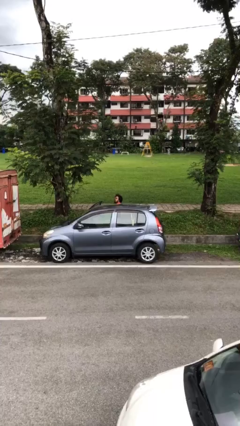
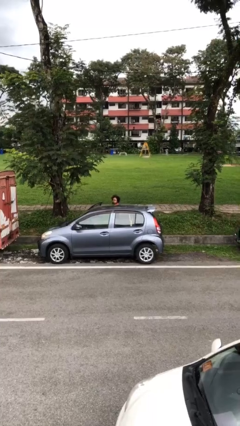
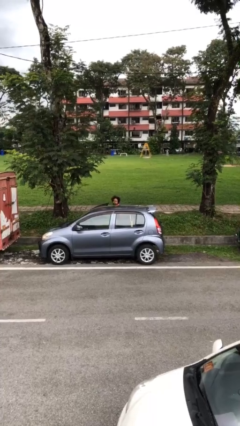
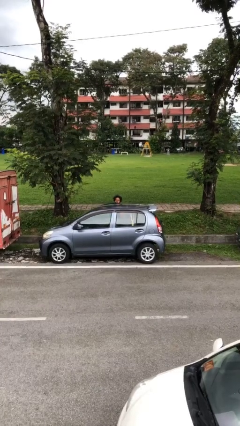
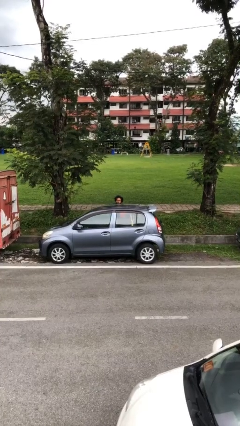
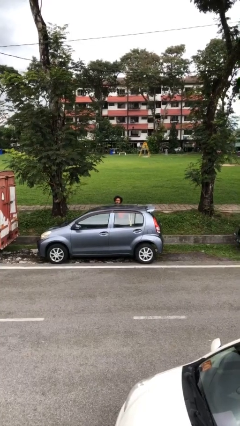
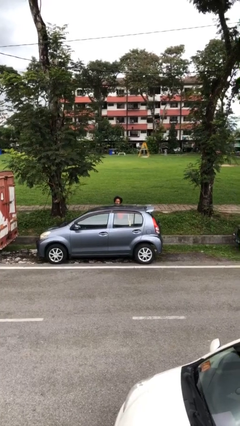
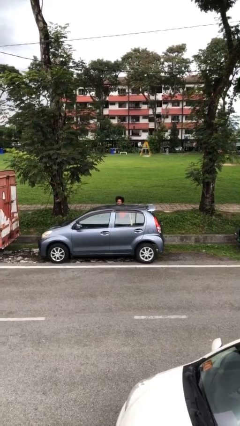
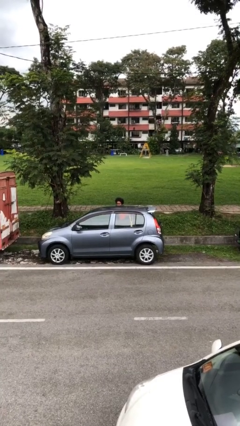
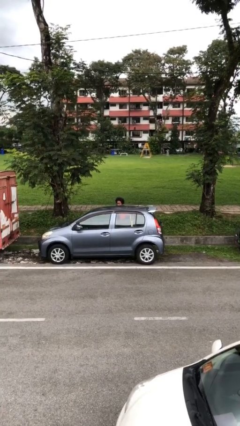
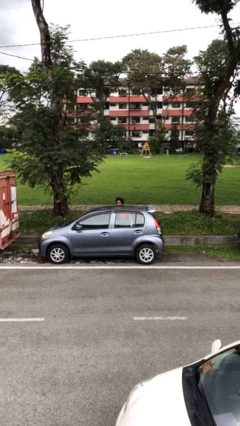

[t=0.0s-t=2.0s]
person closes car door

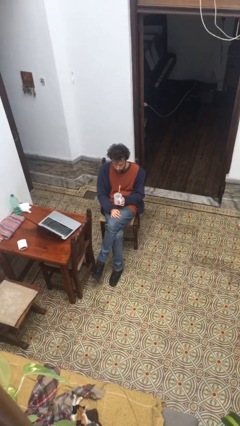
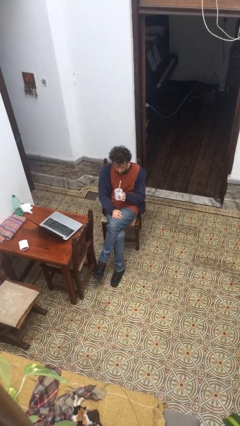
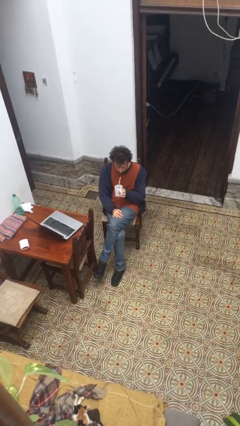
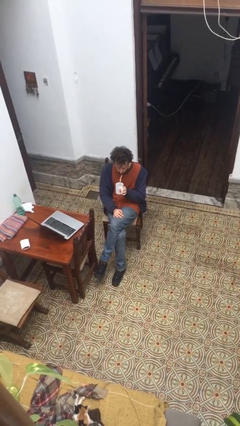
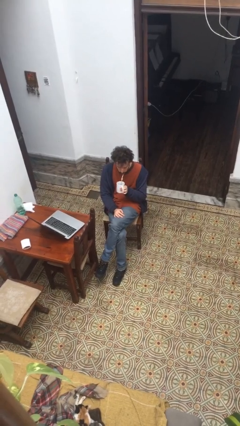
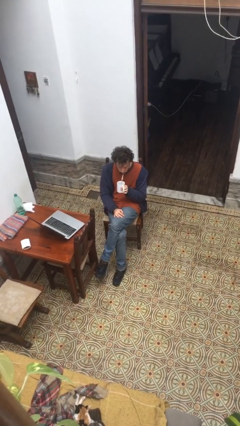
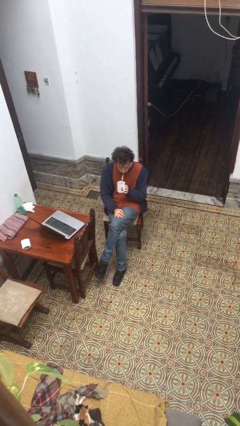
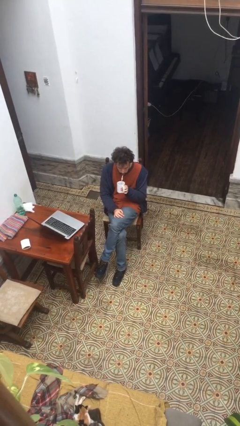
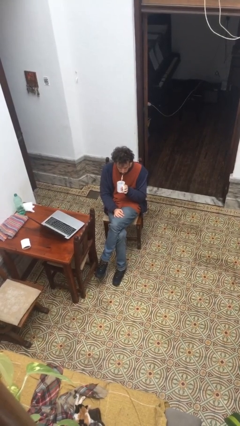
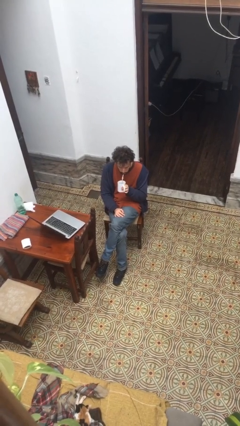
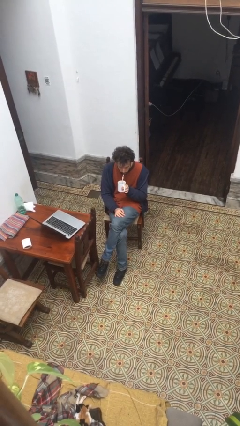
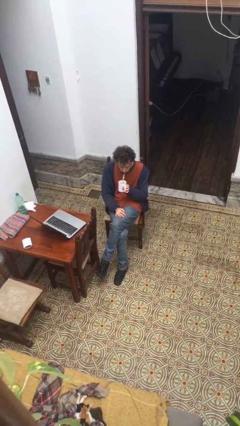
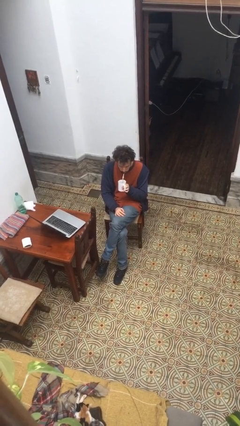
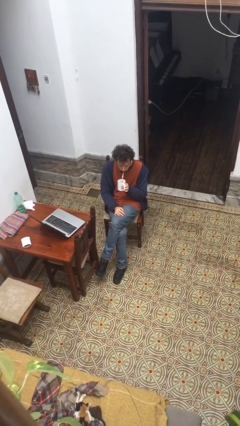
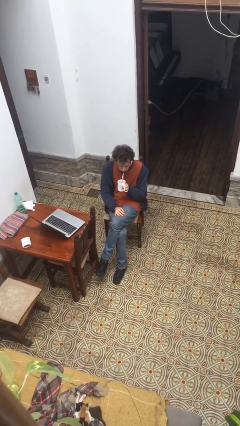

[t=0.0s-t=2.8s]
person drinks from straw

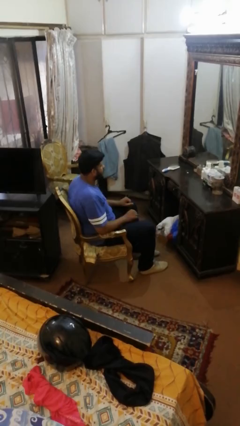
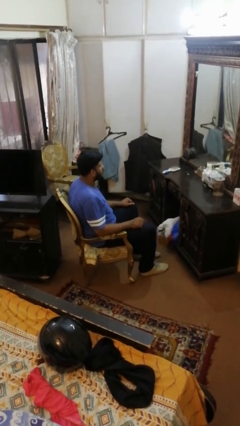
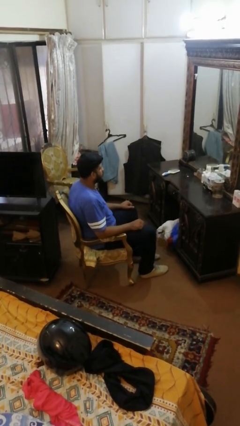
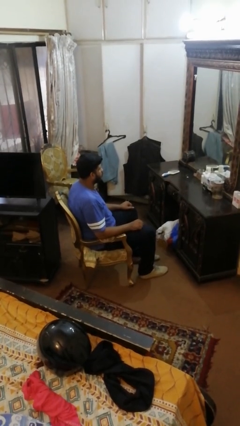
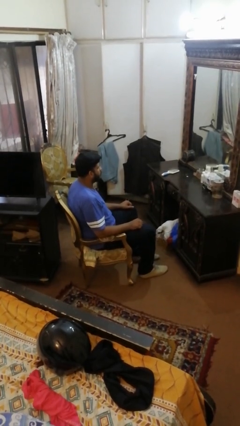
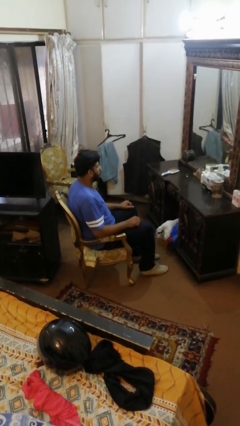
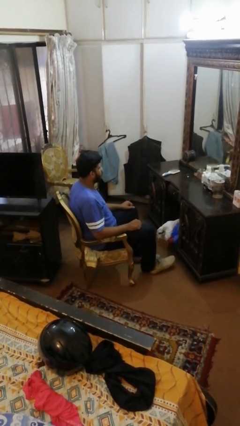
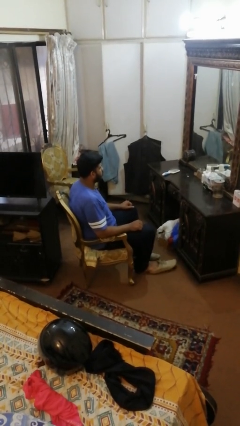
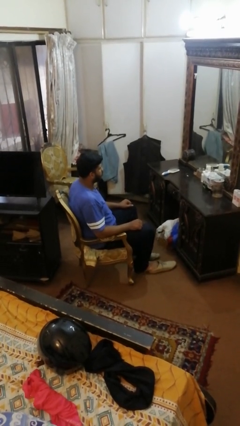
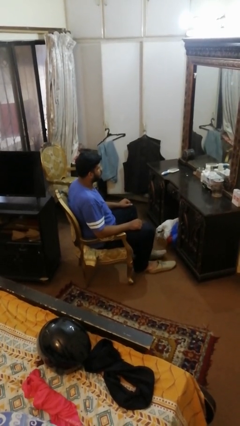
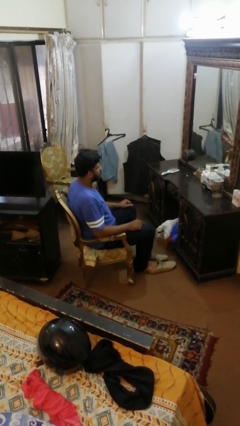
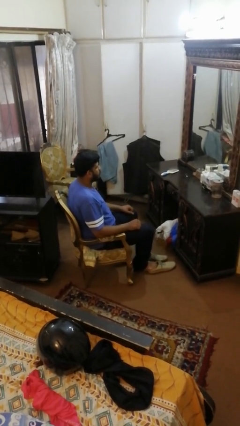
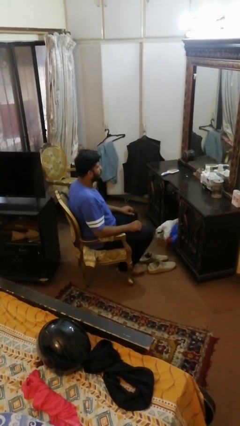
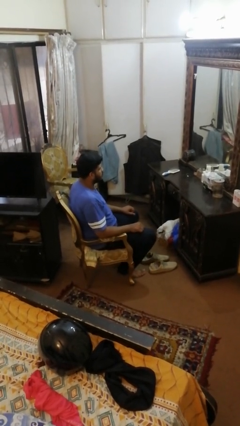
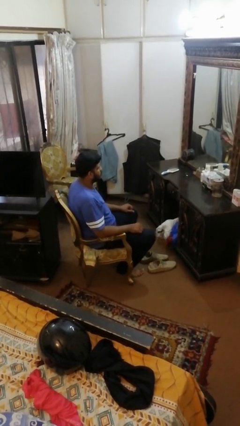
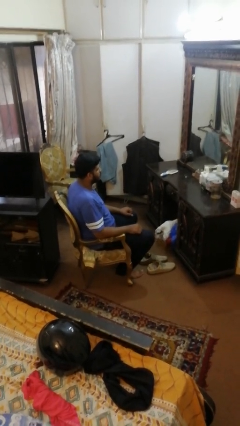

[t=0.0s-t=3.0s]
person takes off shoes

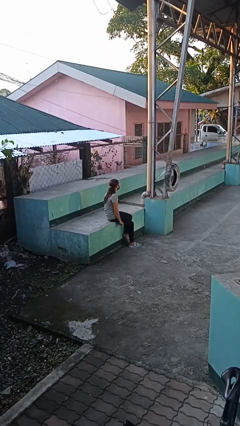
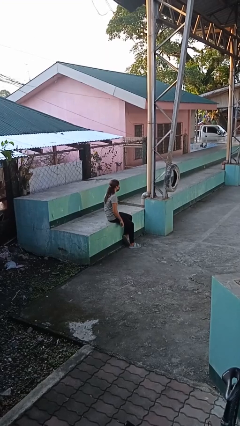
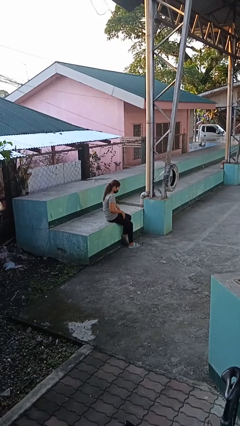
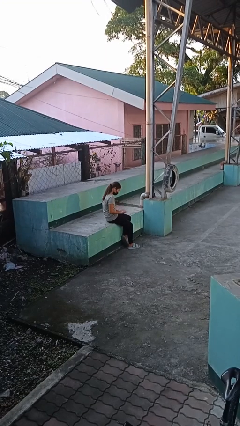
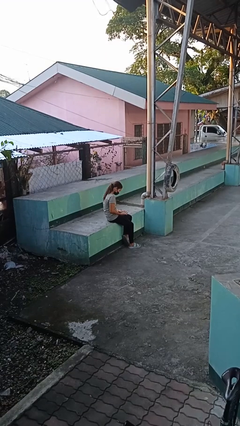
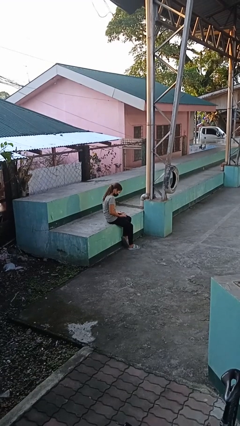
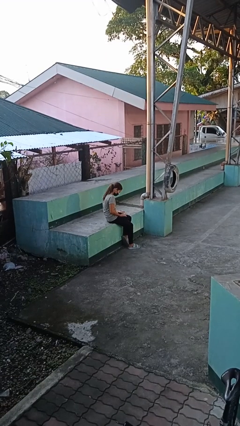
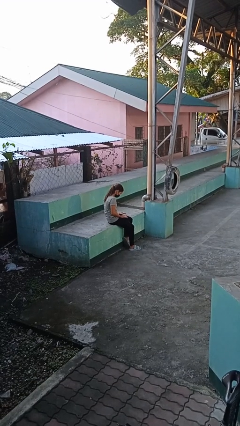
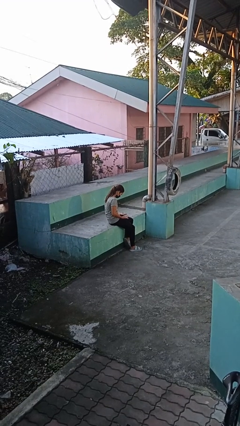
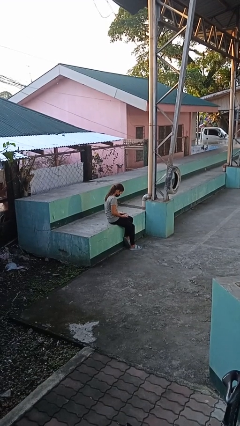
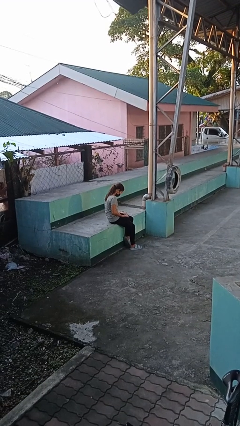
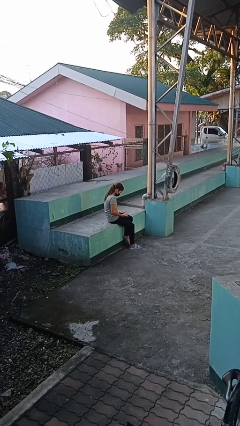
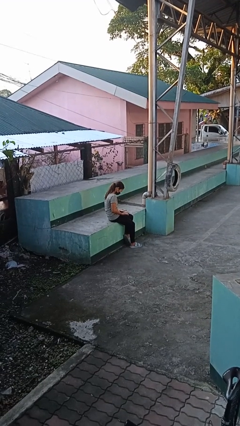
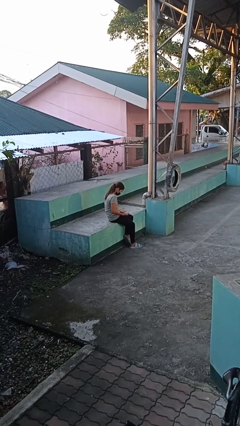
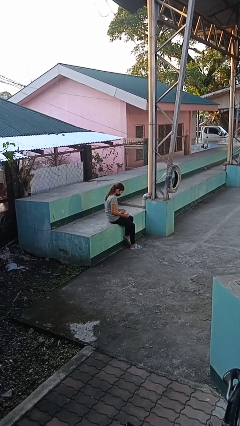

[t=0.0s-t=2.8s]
person looks at hands in lap

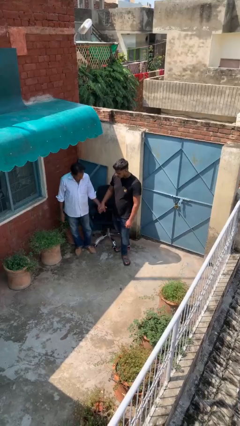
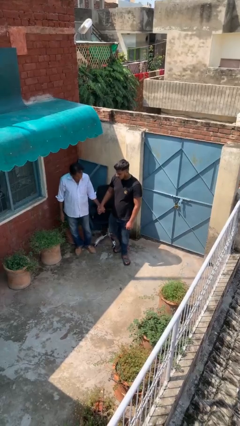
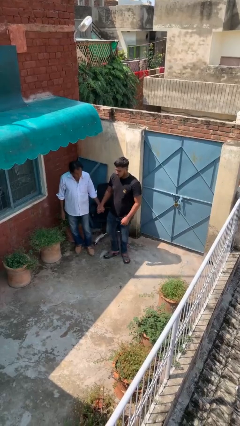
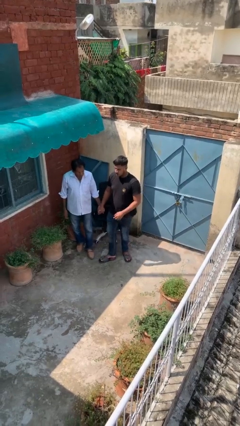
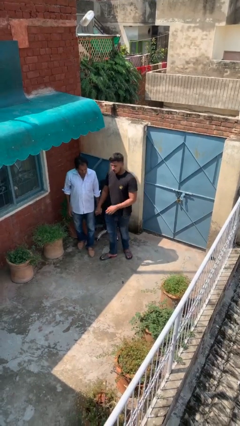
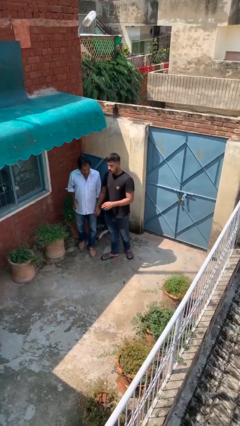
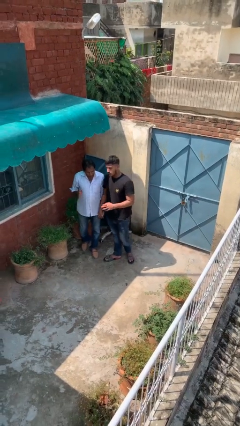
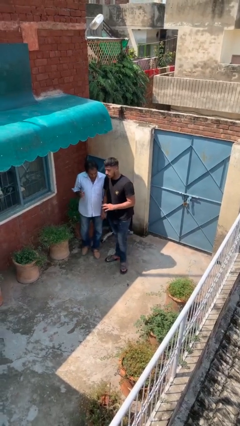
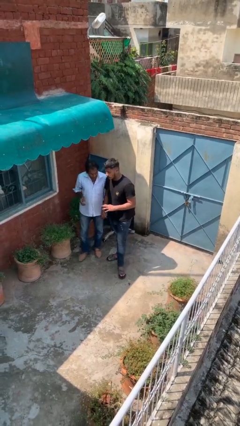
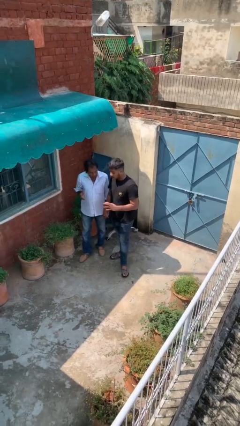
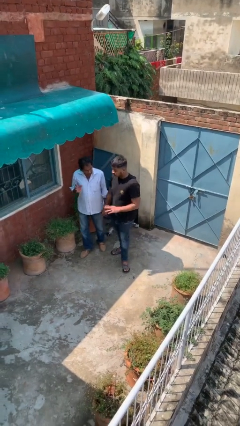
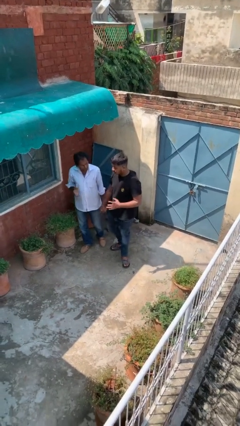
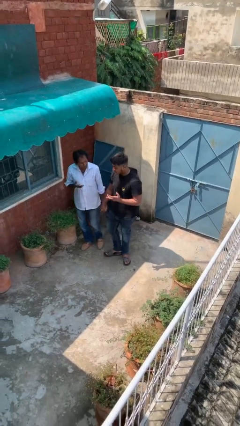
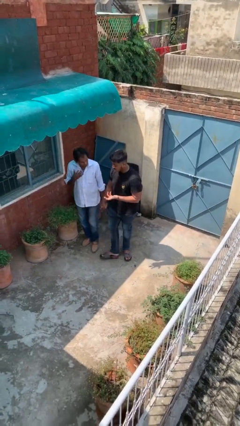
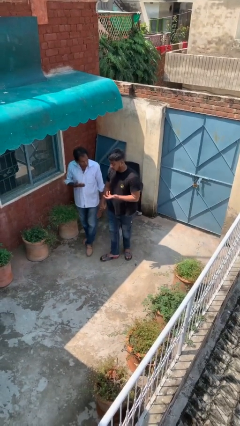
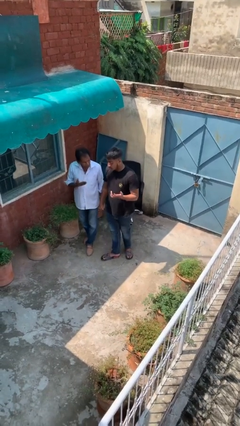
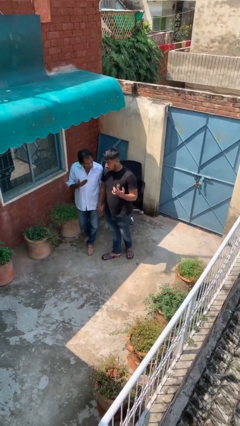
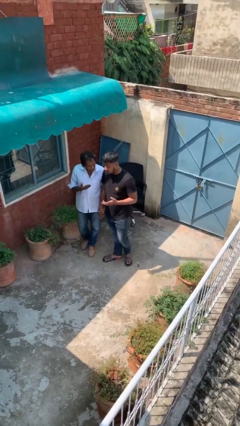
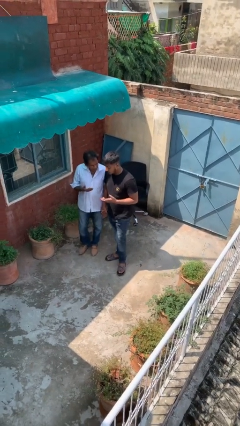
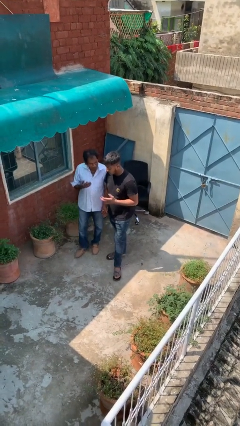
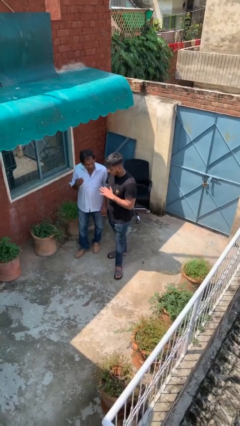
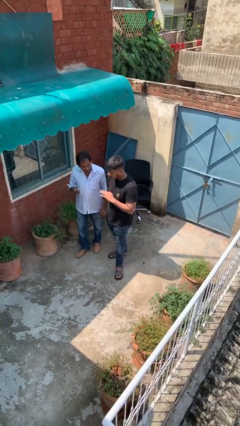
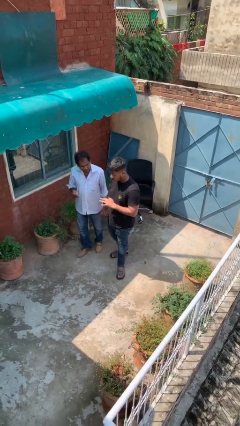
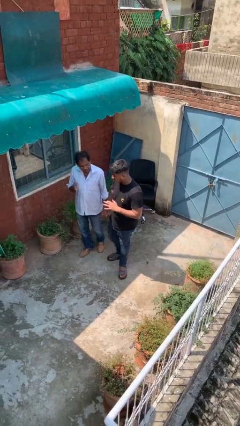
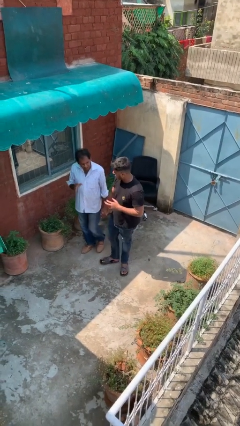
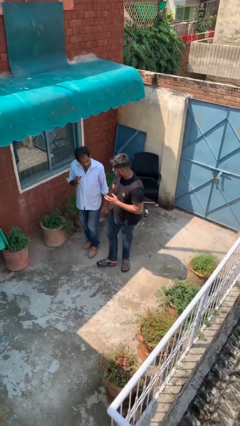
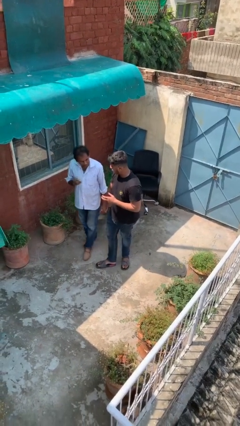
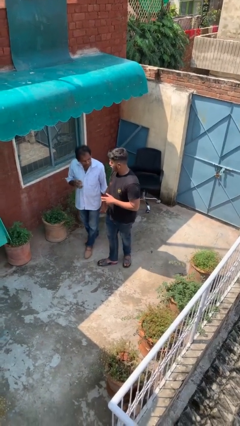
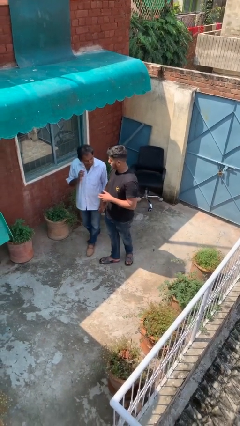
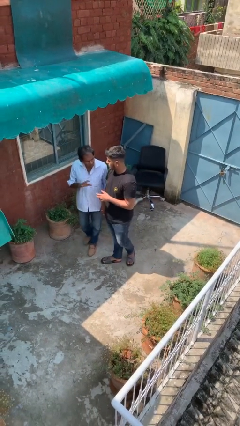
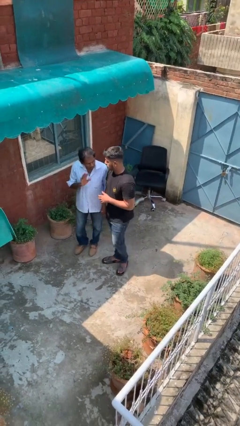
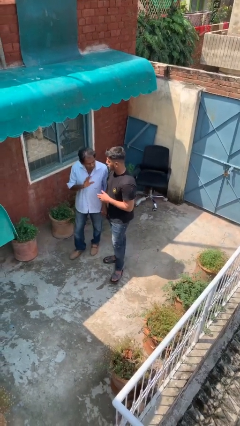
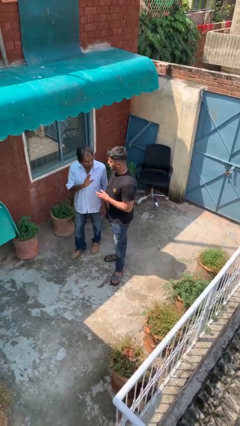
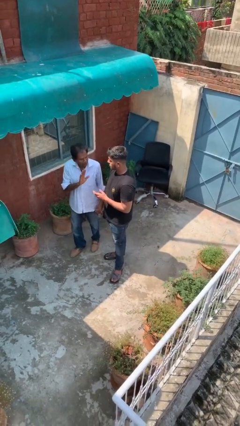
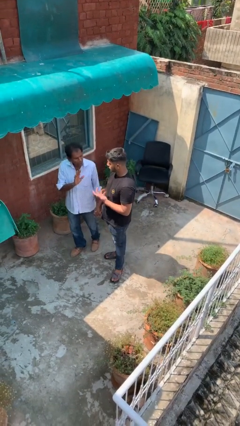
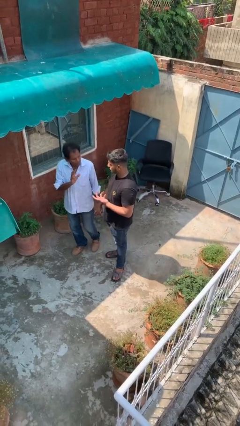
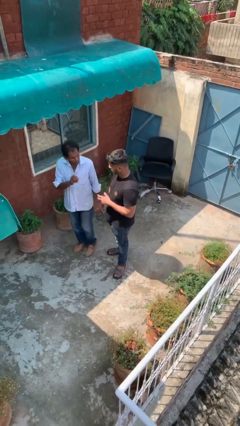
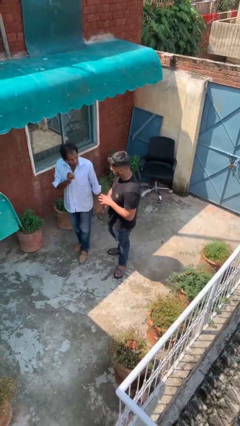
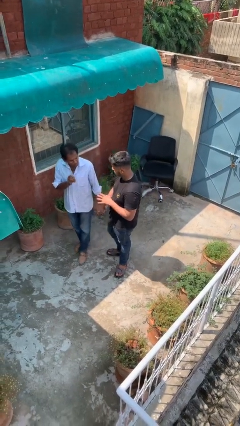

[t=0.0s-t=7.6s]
person holds hand
